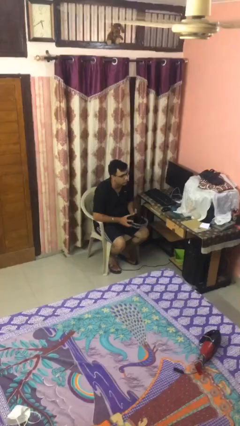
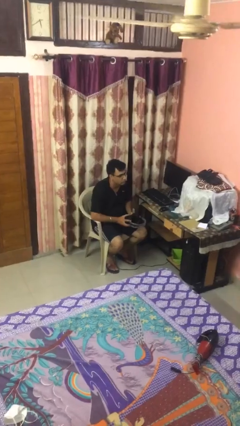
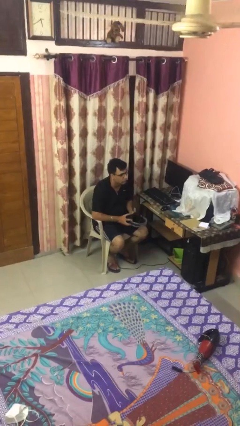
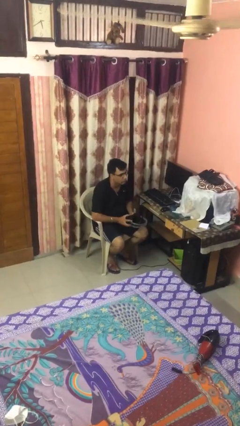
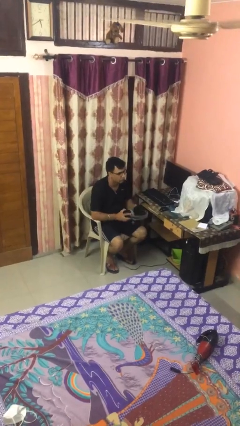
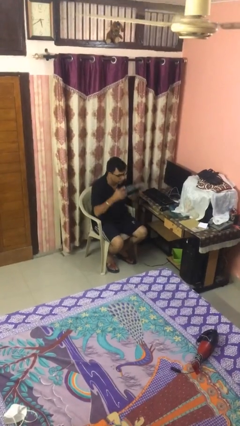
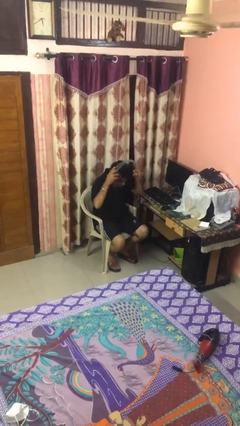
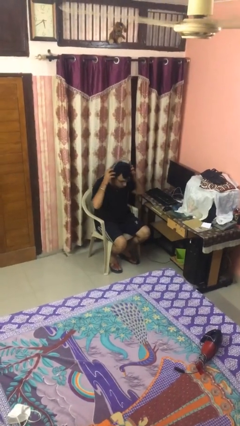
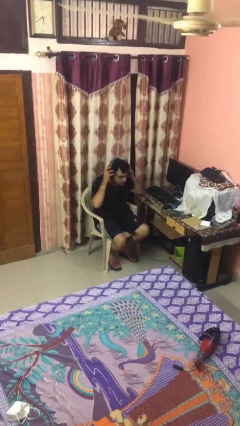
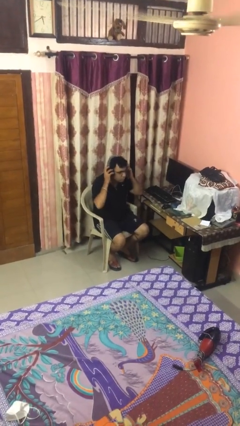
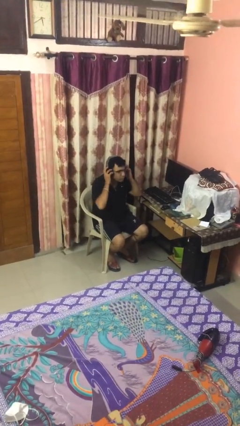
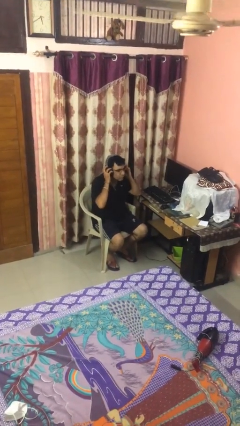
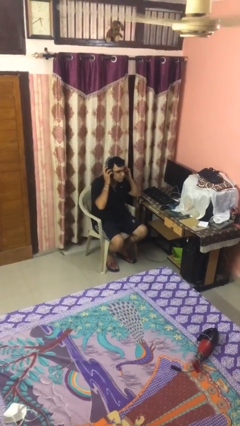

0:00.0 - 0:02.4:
person puts on headphones

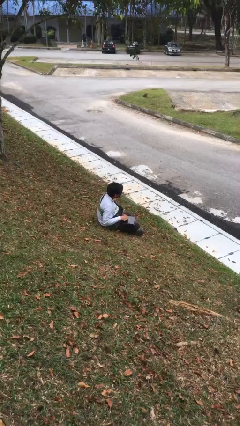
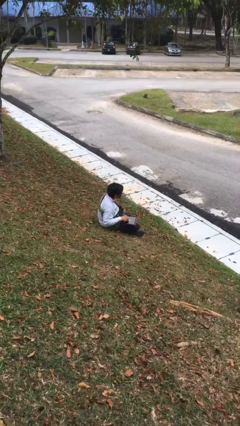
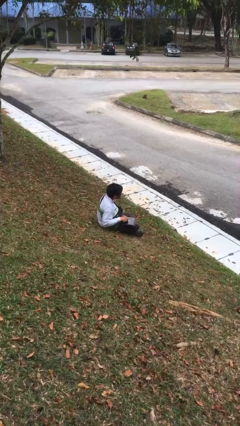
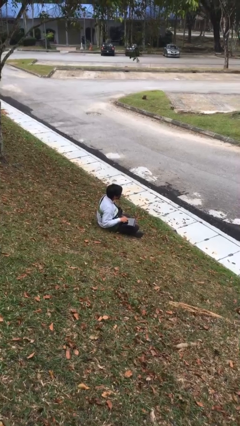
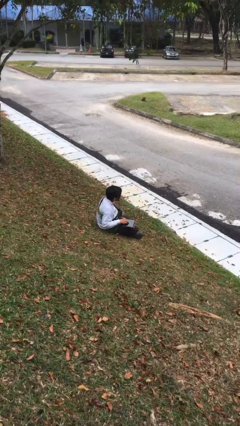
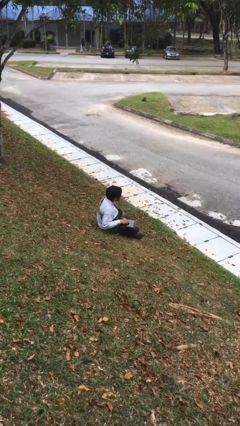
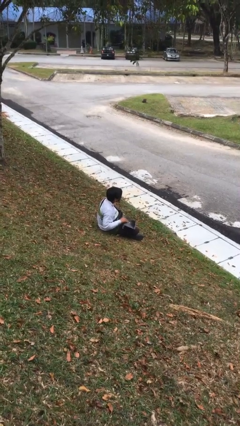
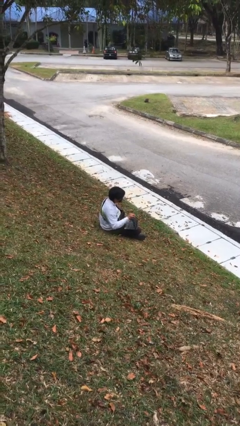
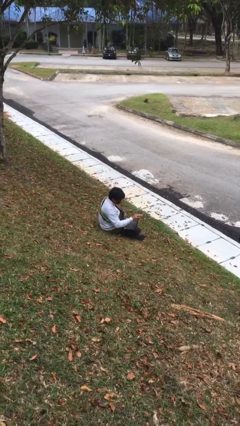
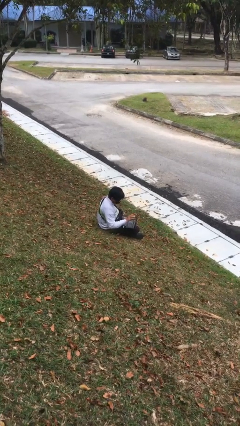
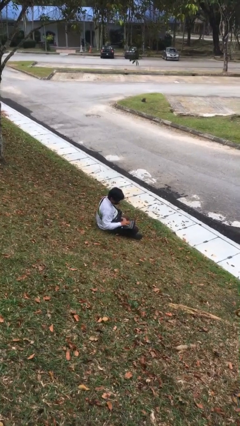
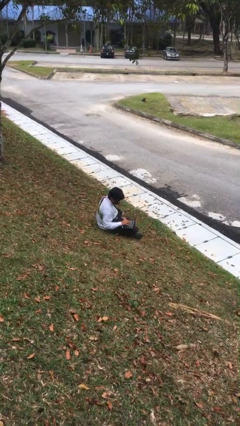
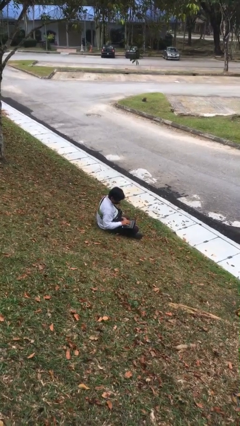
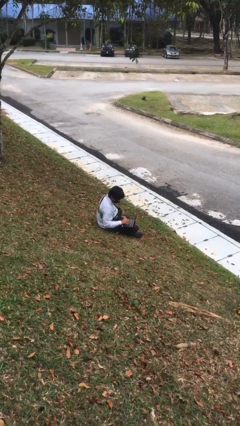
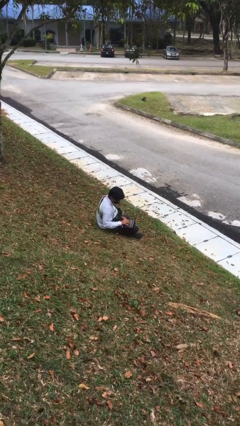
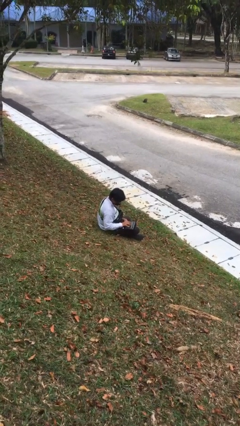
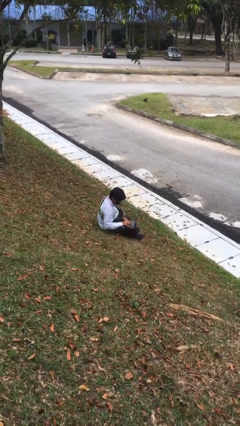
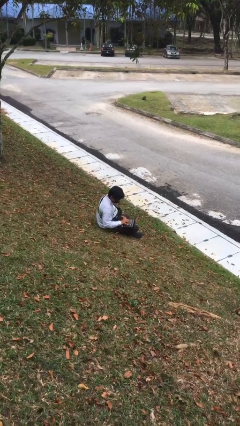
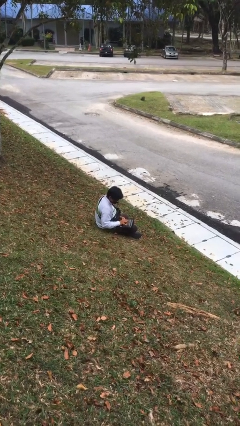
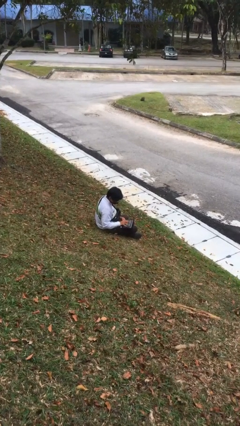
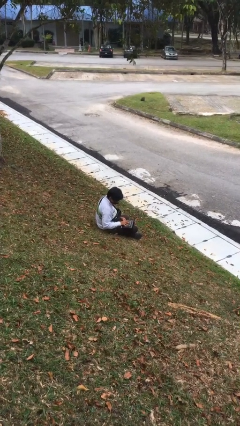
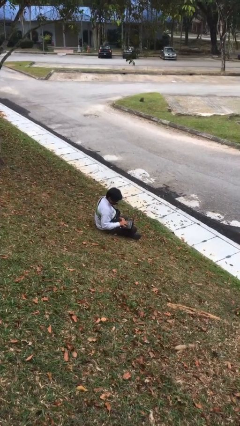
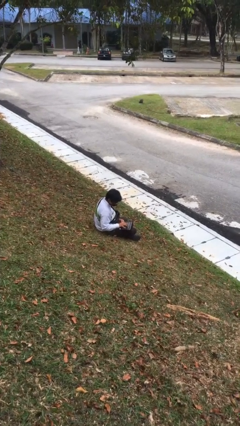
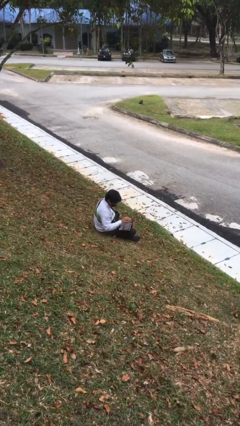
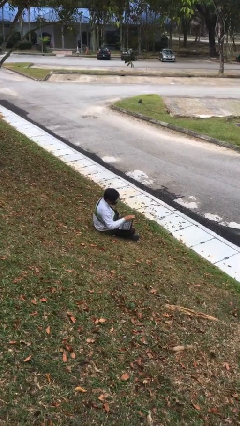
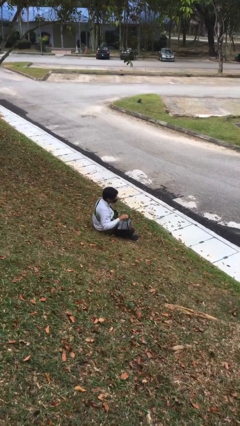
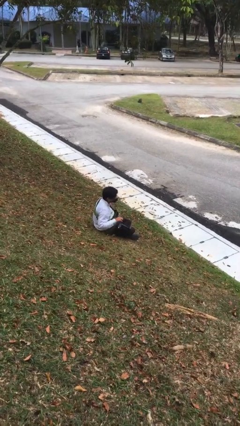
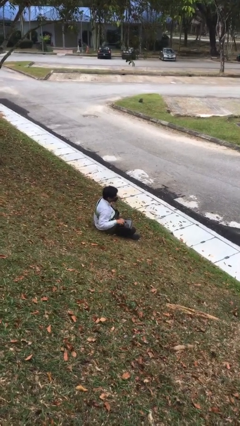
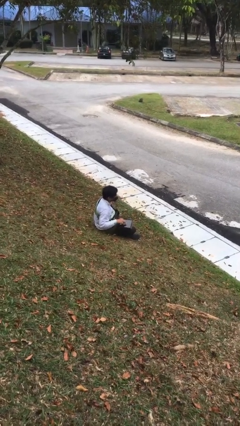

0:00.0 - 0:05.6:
person interacts with laptop

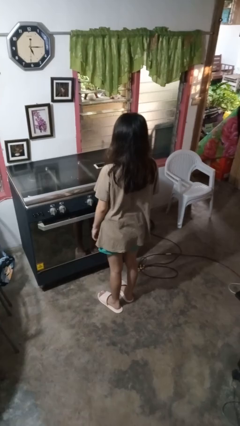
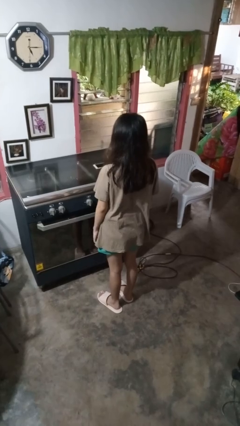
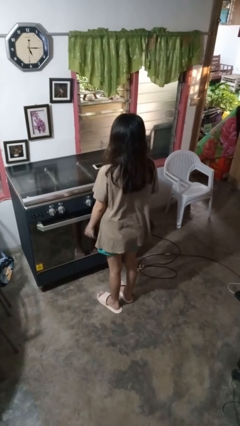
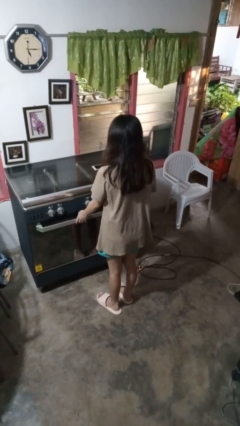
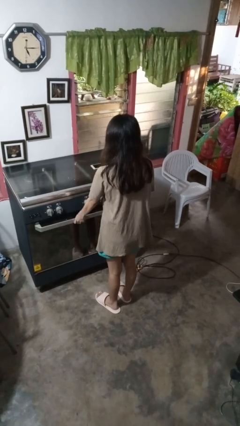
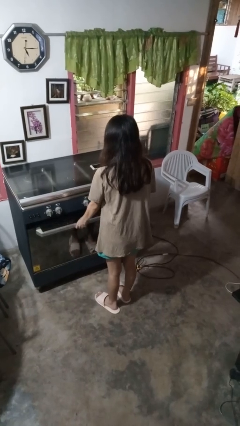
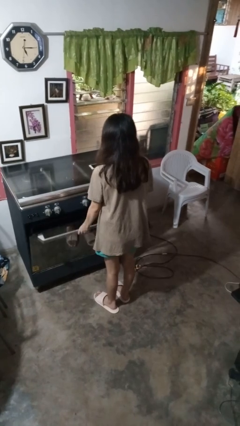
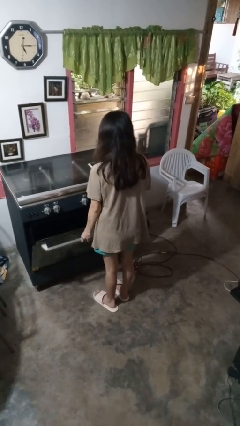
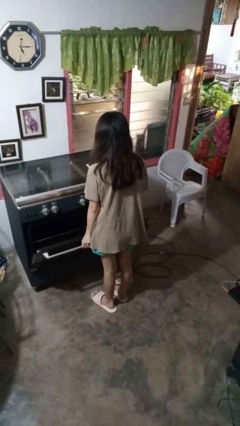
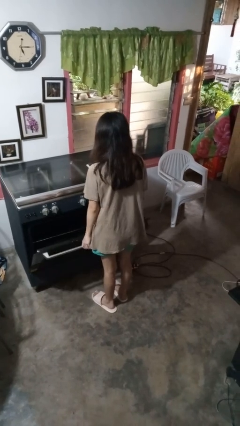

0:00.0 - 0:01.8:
person opens oven door

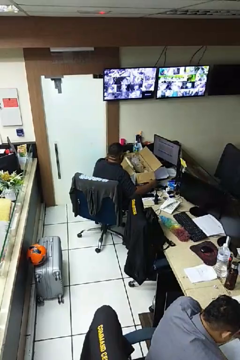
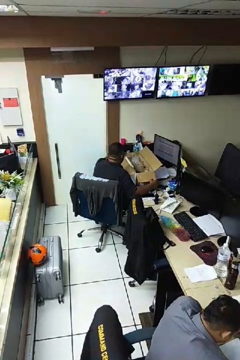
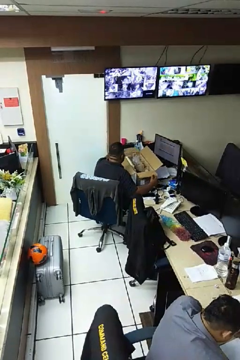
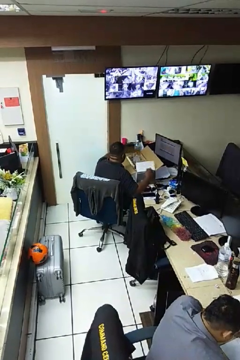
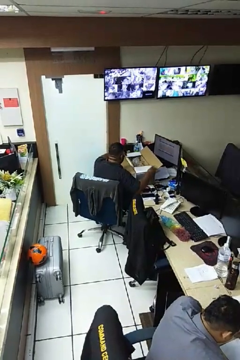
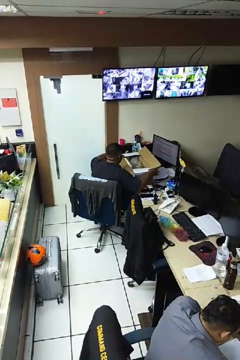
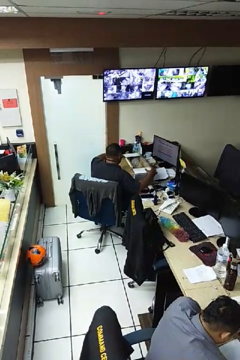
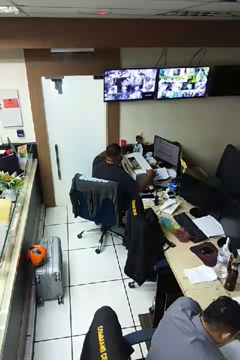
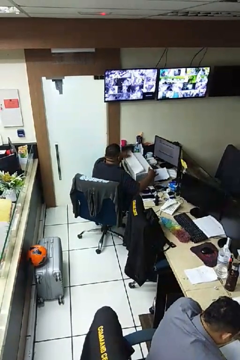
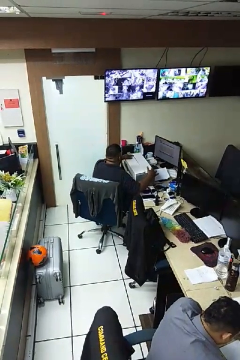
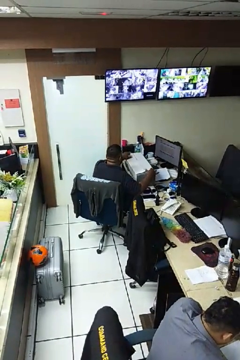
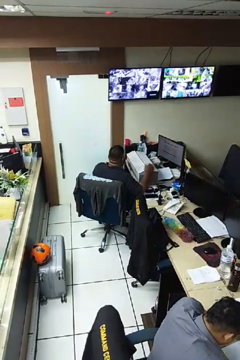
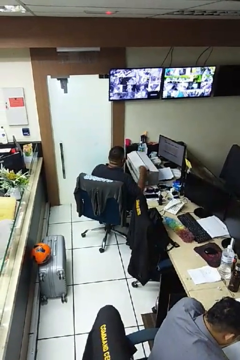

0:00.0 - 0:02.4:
person closes box

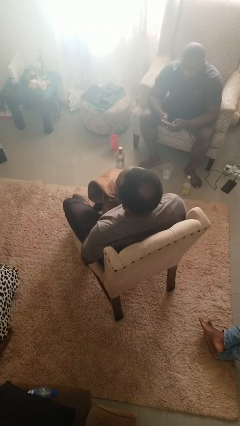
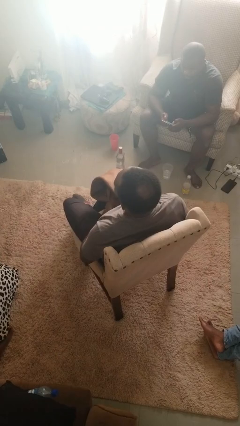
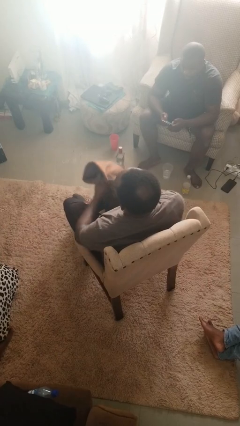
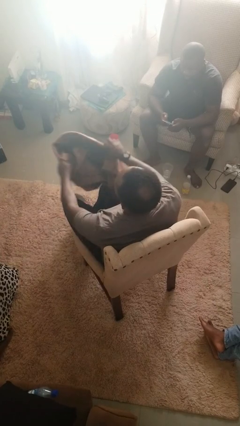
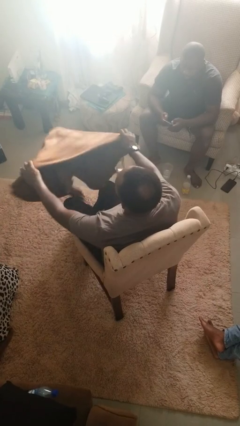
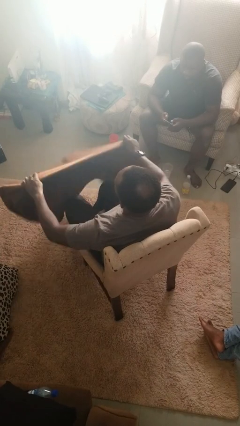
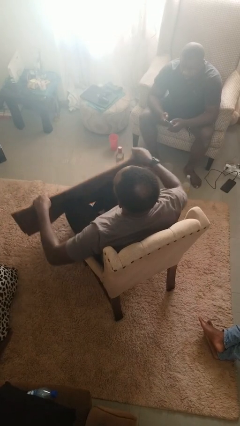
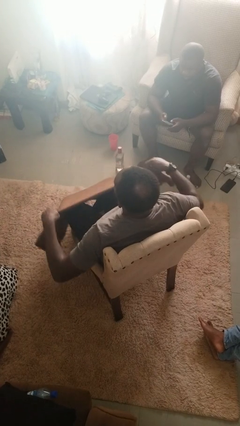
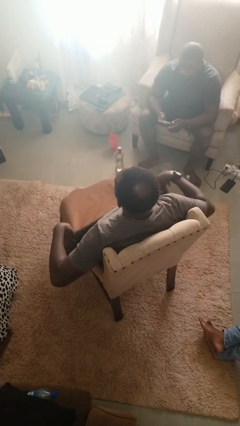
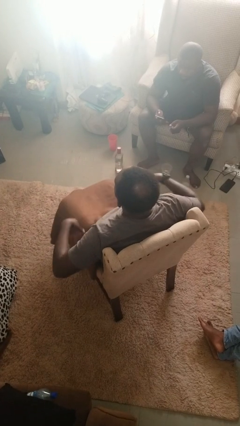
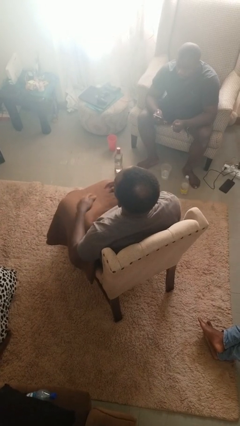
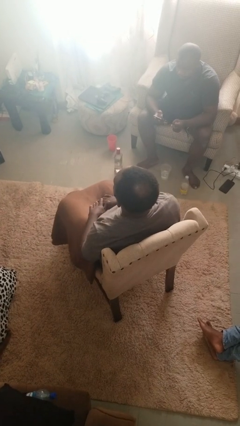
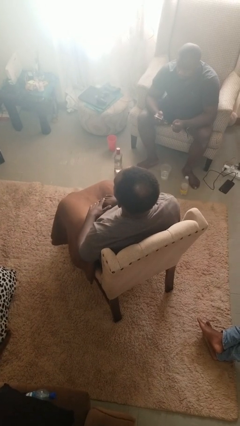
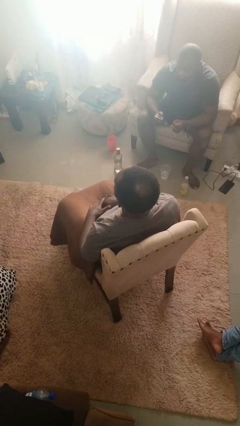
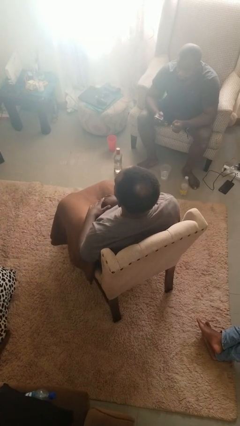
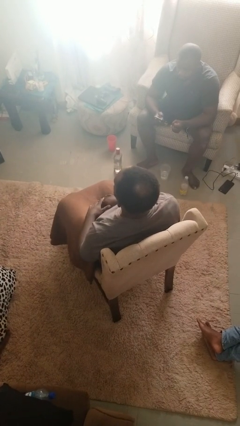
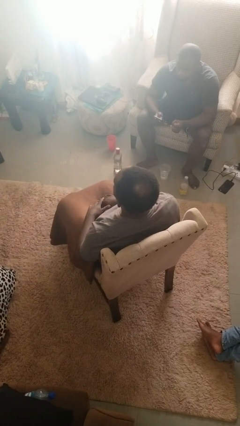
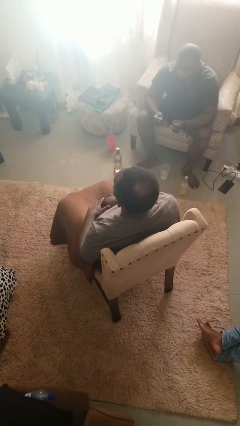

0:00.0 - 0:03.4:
person covers with blanket

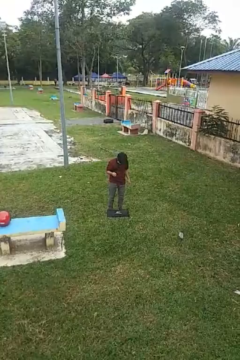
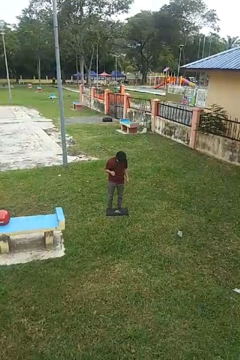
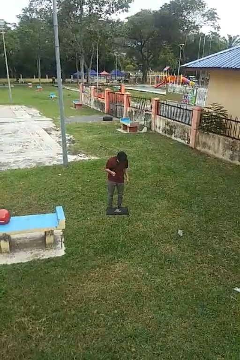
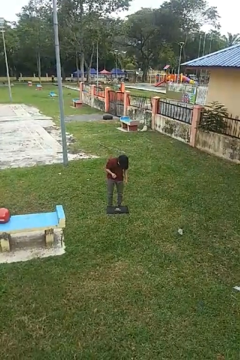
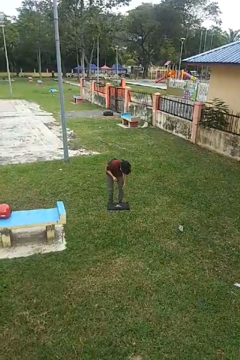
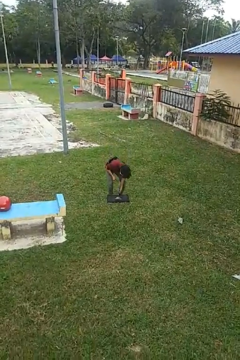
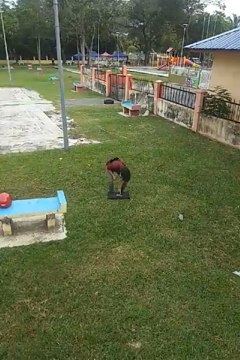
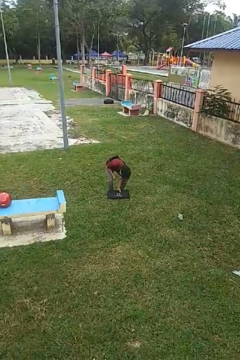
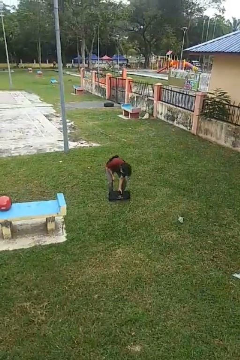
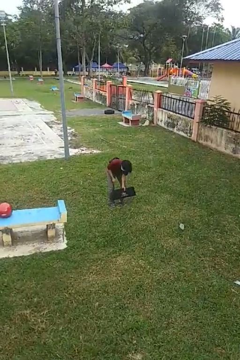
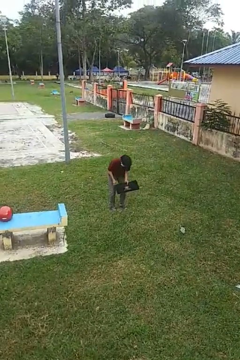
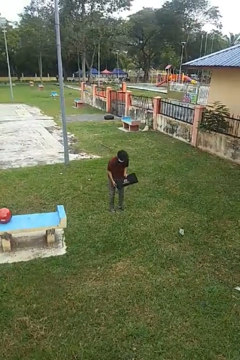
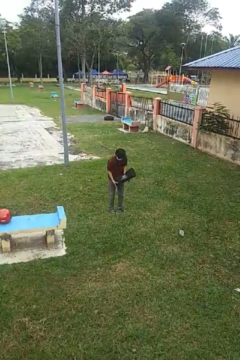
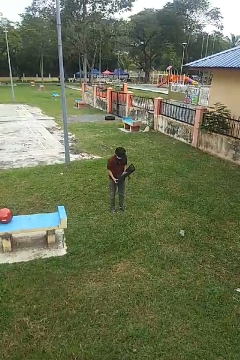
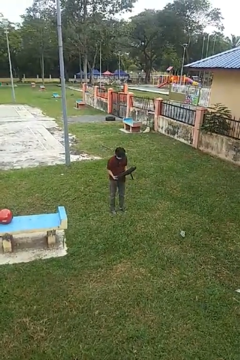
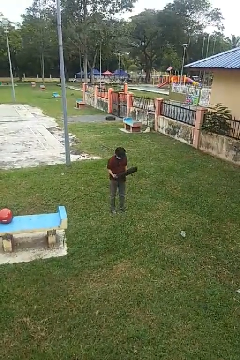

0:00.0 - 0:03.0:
person picks up object from floor
